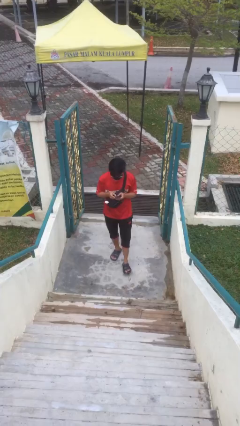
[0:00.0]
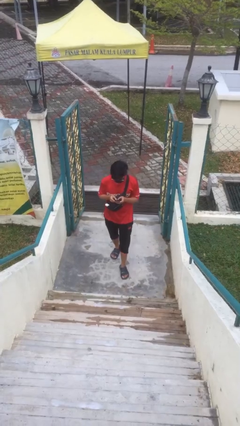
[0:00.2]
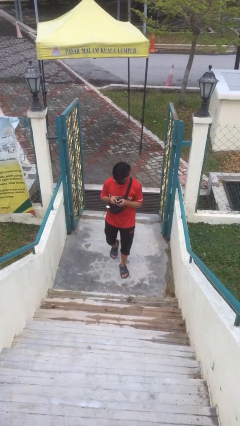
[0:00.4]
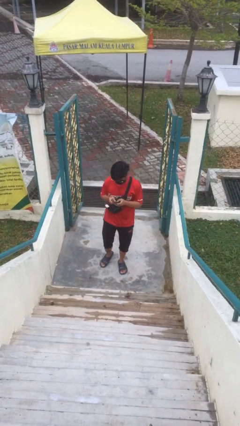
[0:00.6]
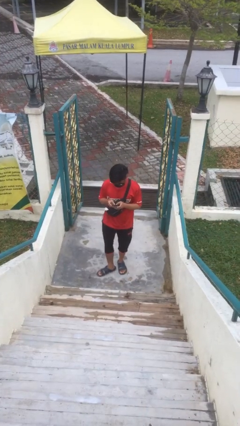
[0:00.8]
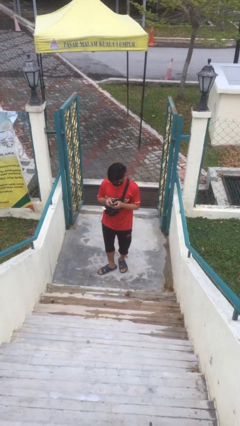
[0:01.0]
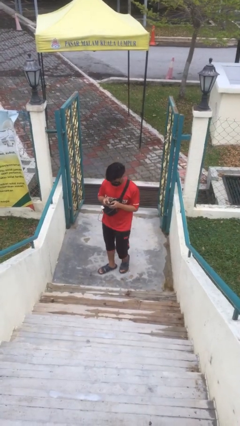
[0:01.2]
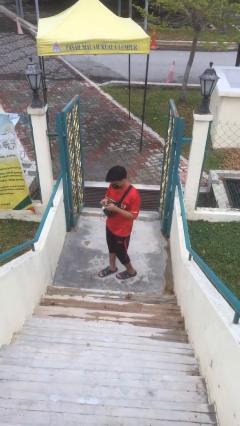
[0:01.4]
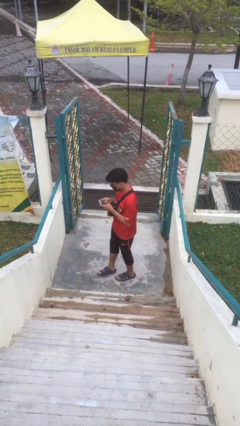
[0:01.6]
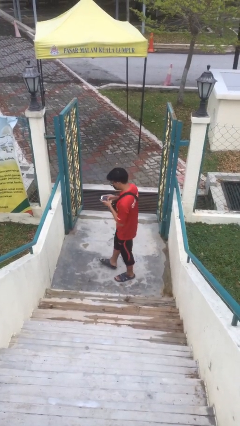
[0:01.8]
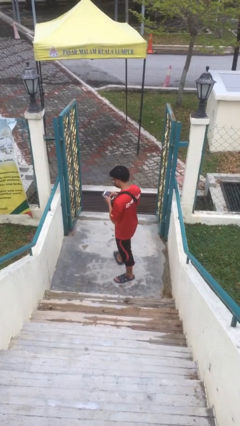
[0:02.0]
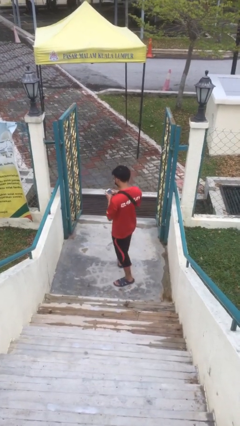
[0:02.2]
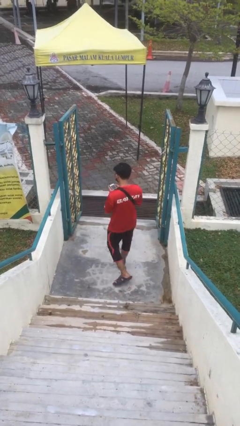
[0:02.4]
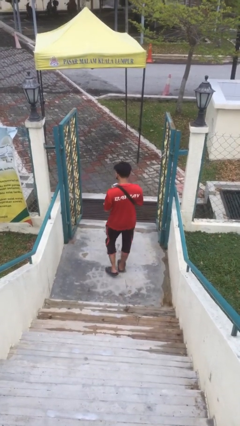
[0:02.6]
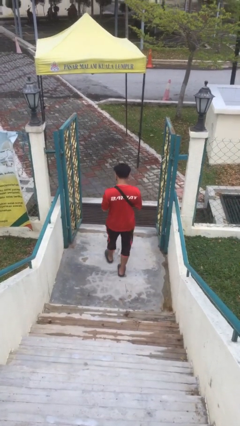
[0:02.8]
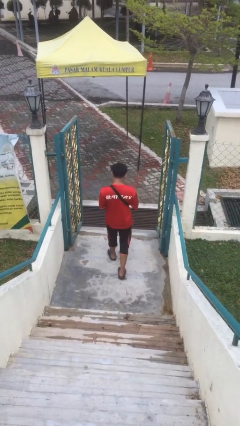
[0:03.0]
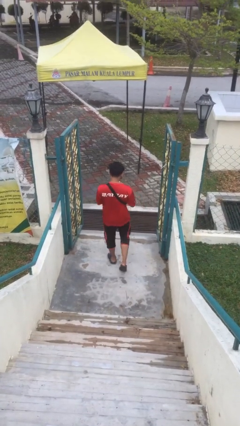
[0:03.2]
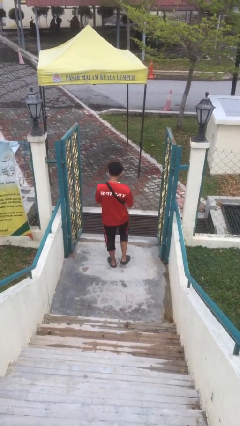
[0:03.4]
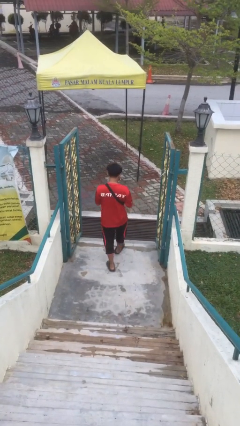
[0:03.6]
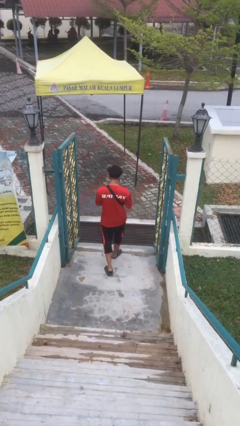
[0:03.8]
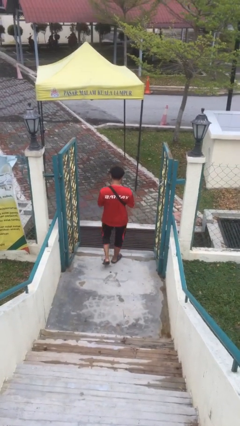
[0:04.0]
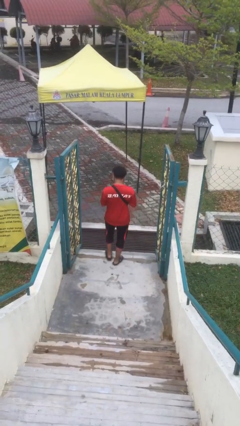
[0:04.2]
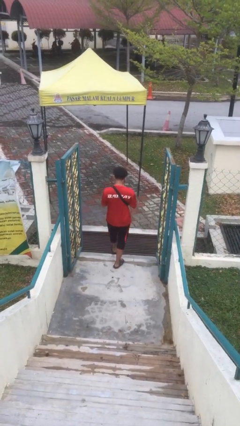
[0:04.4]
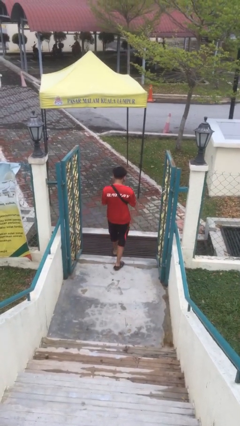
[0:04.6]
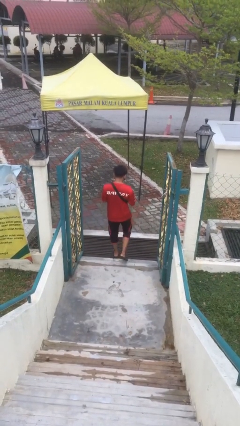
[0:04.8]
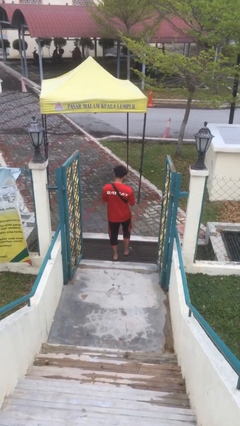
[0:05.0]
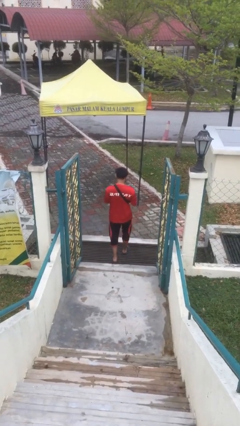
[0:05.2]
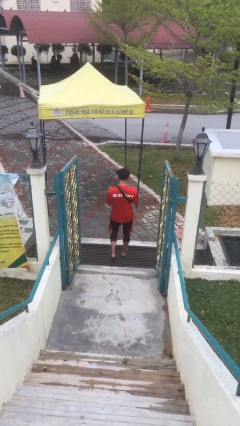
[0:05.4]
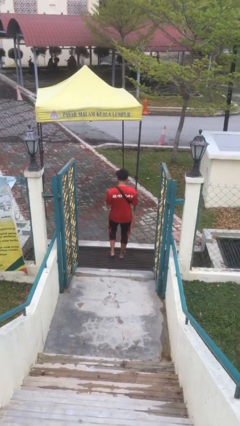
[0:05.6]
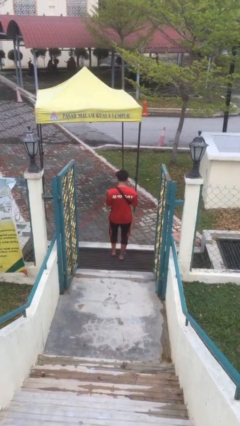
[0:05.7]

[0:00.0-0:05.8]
person exits scene through structure

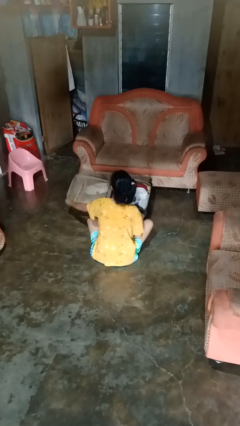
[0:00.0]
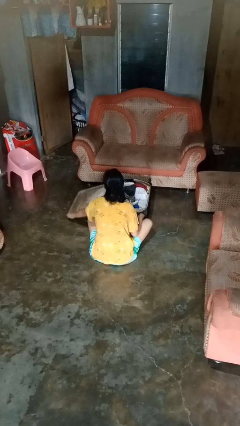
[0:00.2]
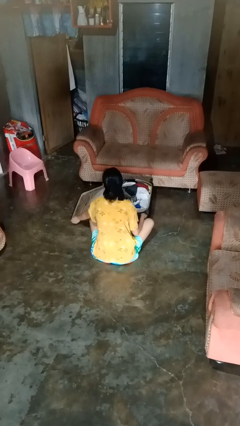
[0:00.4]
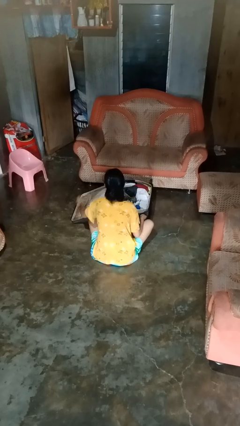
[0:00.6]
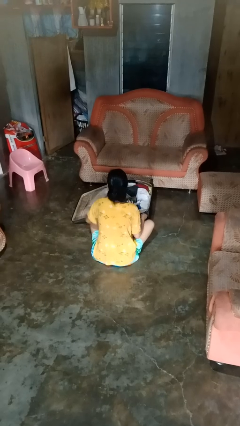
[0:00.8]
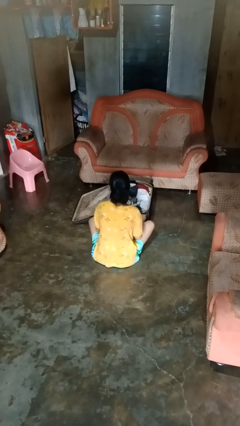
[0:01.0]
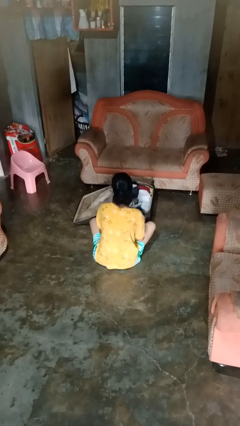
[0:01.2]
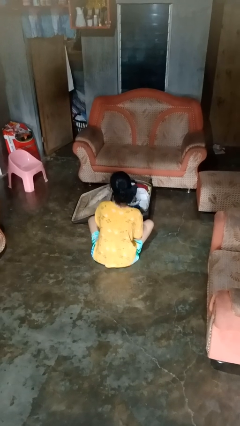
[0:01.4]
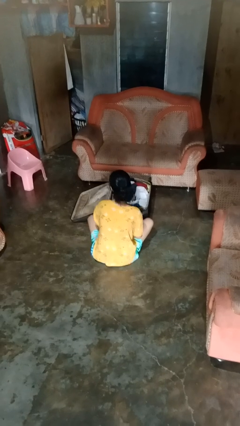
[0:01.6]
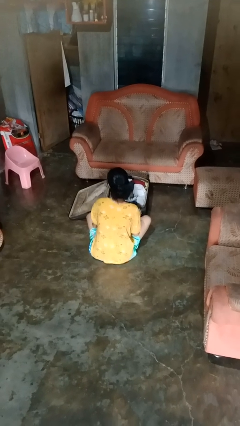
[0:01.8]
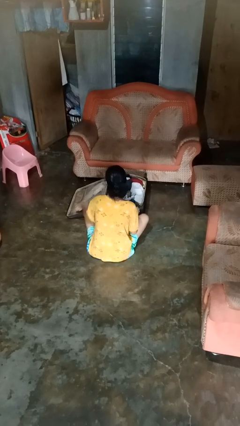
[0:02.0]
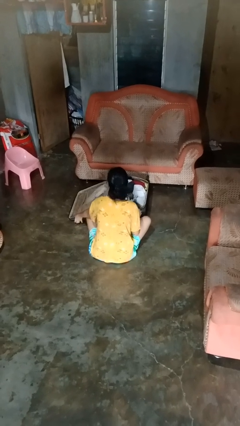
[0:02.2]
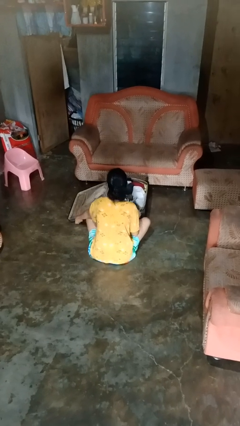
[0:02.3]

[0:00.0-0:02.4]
person opens suitcase

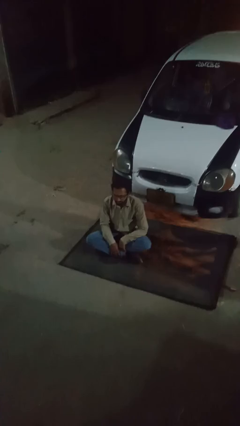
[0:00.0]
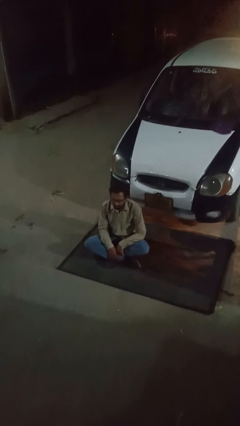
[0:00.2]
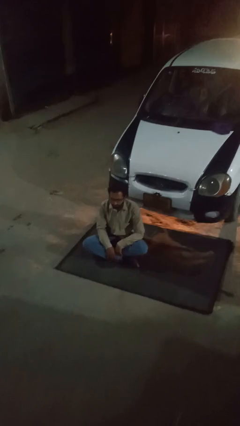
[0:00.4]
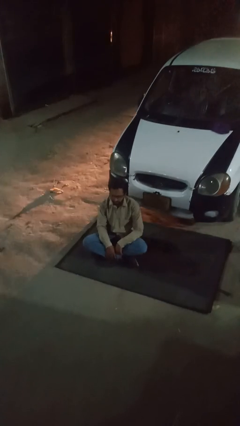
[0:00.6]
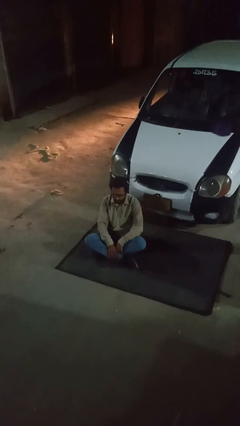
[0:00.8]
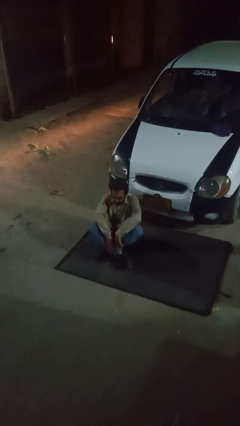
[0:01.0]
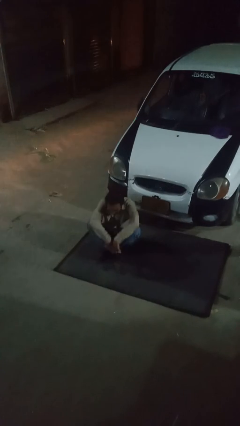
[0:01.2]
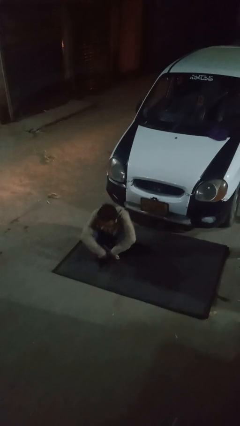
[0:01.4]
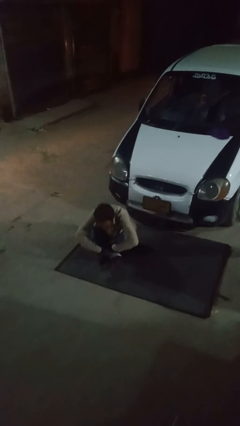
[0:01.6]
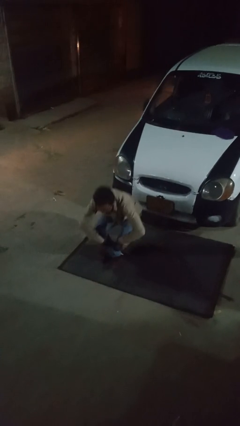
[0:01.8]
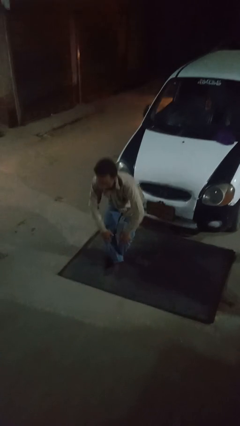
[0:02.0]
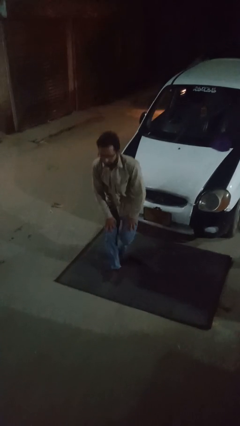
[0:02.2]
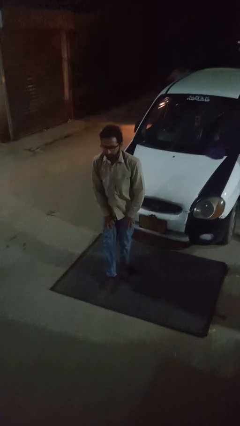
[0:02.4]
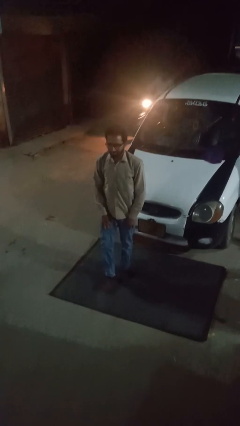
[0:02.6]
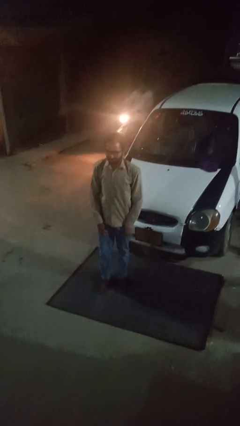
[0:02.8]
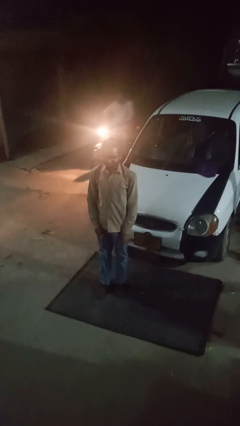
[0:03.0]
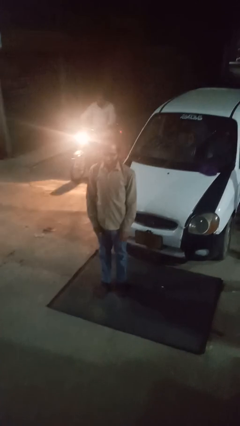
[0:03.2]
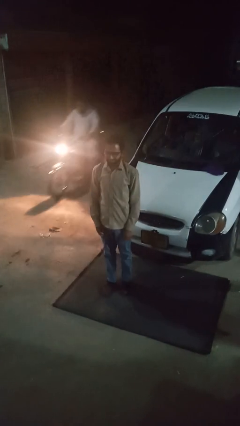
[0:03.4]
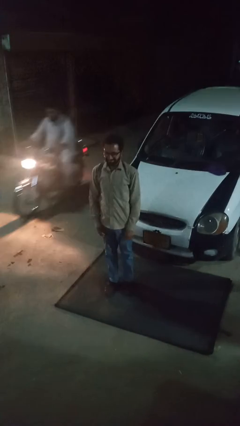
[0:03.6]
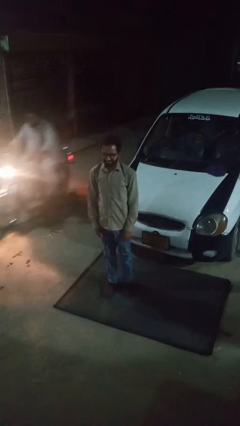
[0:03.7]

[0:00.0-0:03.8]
person stands up from floor

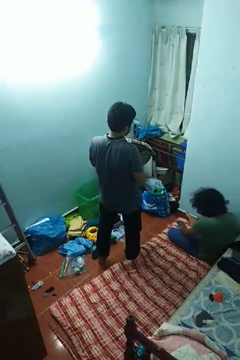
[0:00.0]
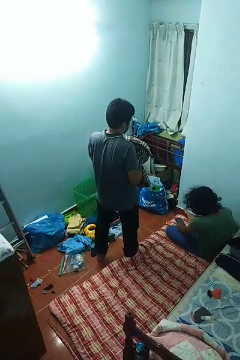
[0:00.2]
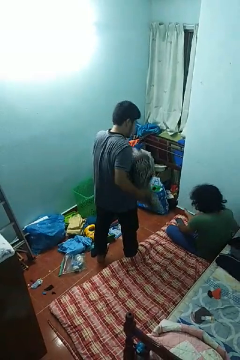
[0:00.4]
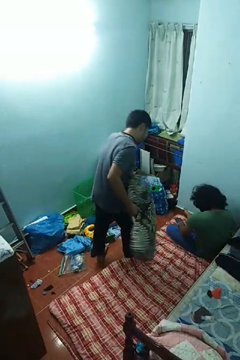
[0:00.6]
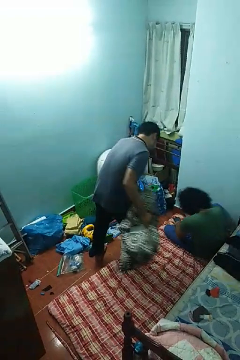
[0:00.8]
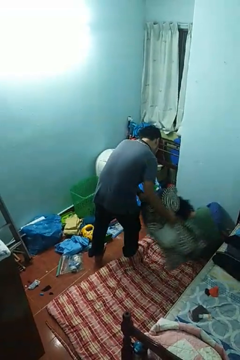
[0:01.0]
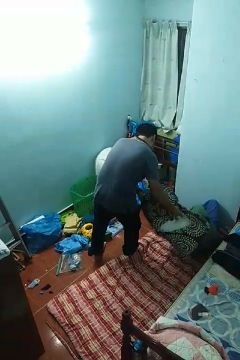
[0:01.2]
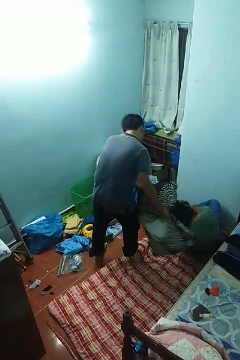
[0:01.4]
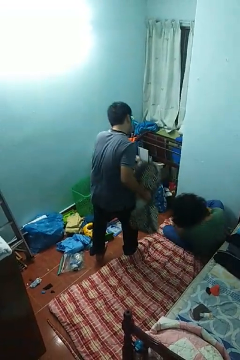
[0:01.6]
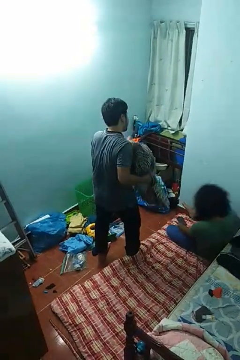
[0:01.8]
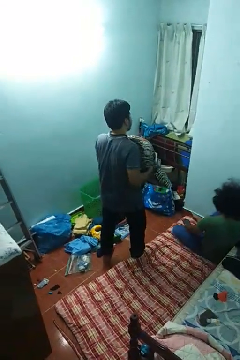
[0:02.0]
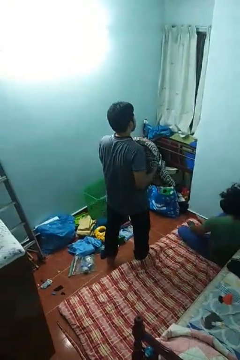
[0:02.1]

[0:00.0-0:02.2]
person hits person with pillow

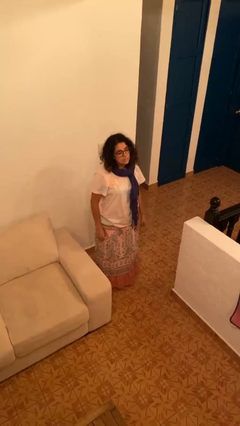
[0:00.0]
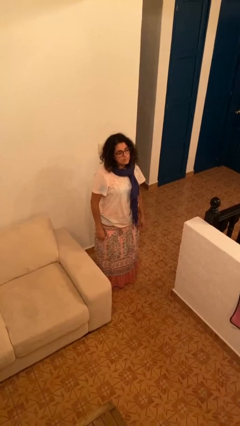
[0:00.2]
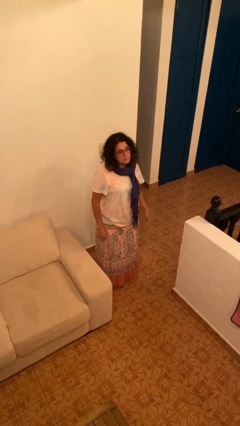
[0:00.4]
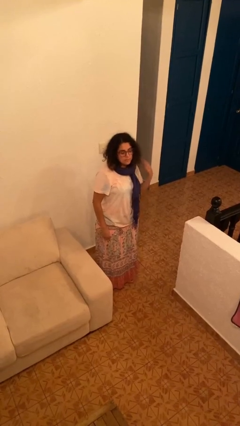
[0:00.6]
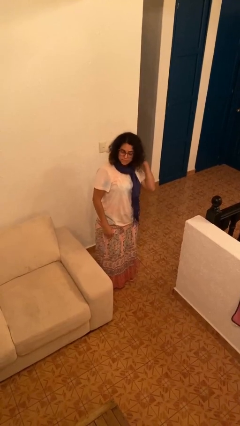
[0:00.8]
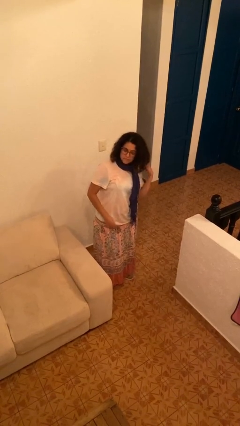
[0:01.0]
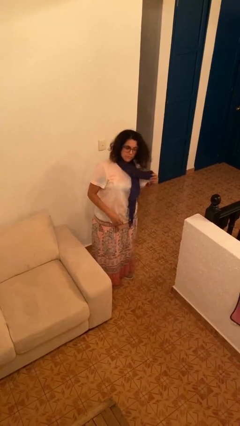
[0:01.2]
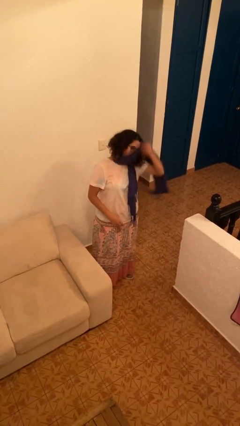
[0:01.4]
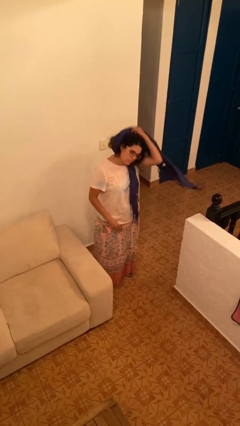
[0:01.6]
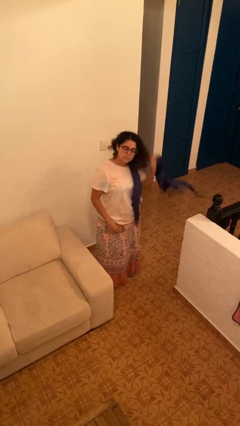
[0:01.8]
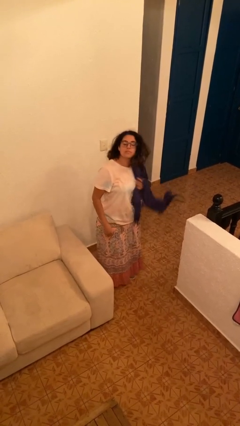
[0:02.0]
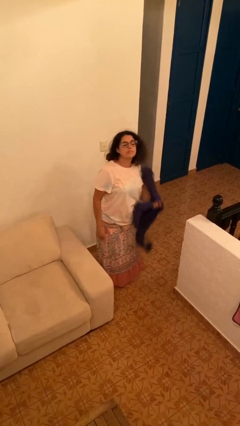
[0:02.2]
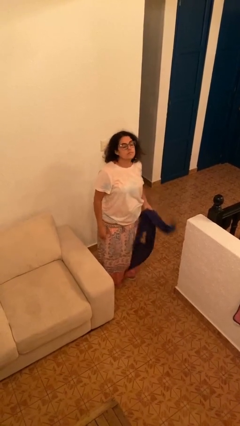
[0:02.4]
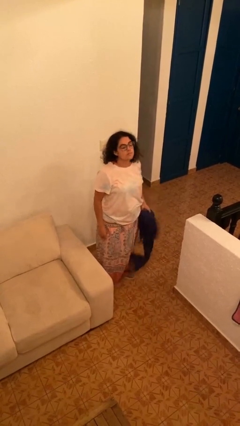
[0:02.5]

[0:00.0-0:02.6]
person takes off scarf

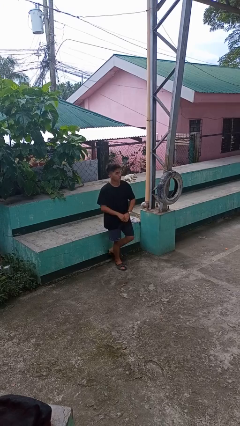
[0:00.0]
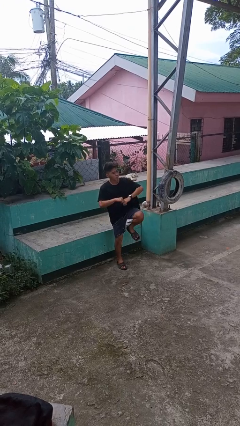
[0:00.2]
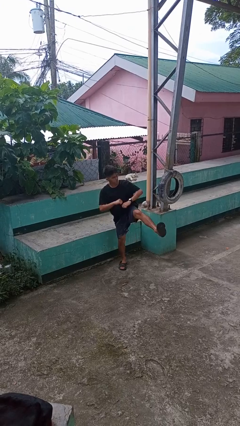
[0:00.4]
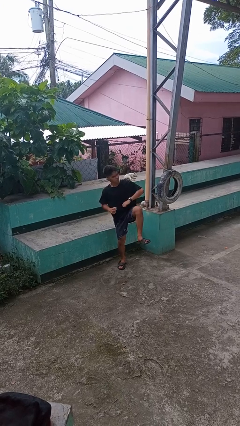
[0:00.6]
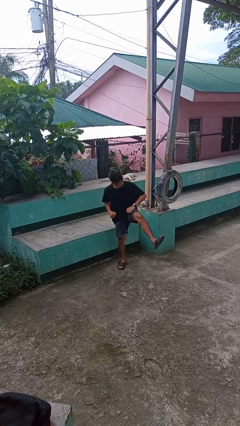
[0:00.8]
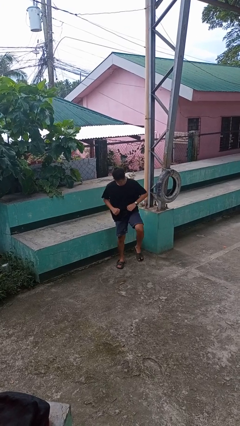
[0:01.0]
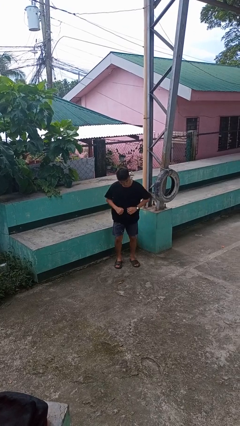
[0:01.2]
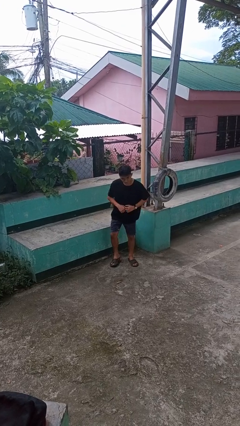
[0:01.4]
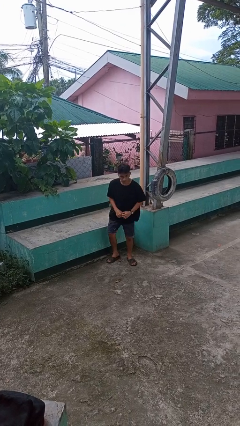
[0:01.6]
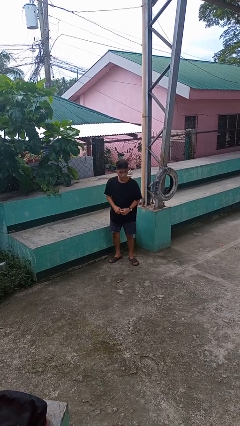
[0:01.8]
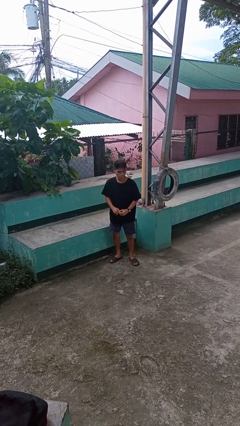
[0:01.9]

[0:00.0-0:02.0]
person karate kicks
